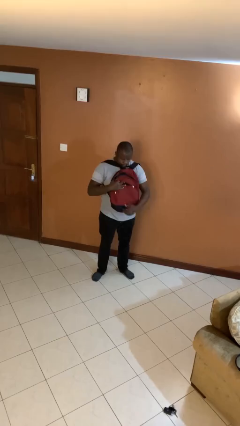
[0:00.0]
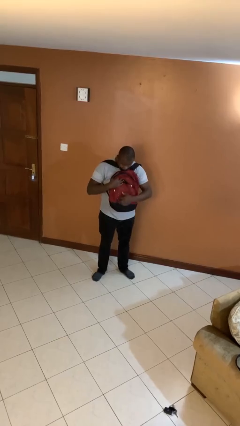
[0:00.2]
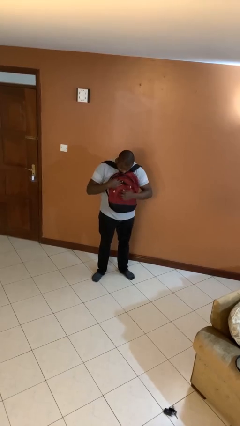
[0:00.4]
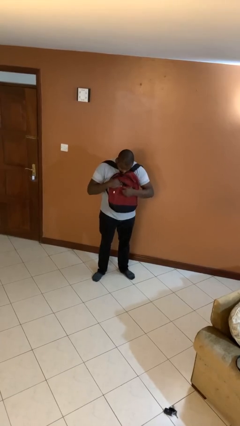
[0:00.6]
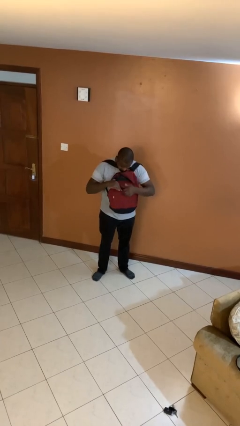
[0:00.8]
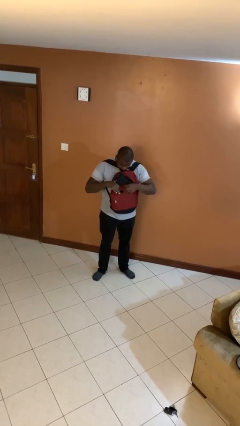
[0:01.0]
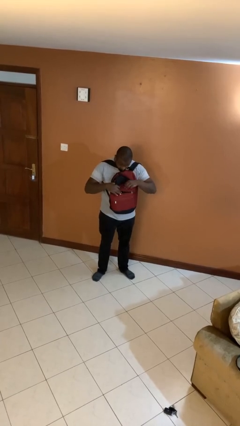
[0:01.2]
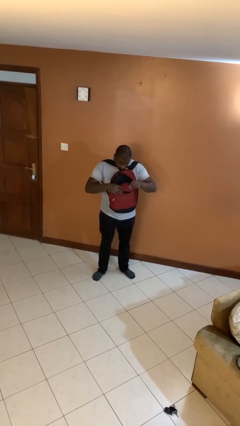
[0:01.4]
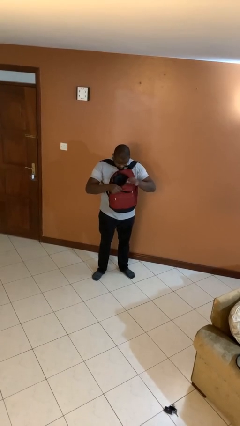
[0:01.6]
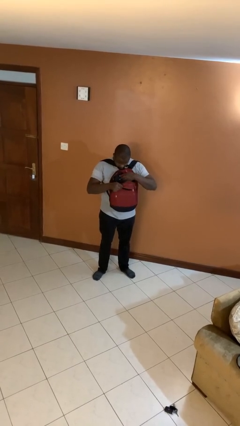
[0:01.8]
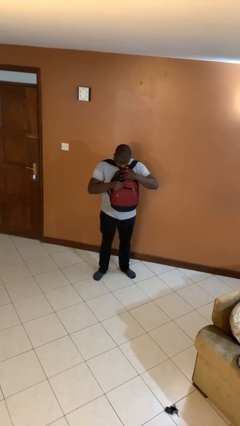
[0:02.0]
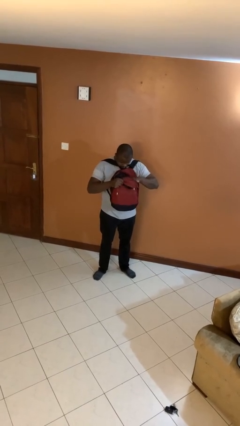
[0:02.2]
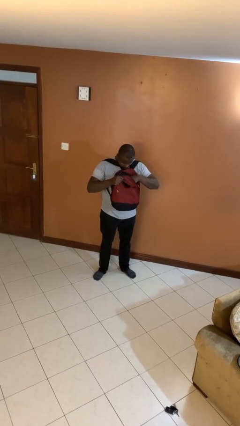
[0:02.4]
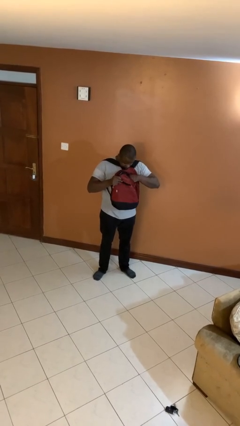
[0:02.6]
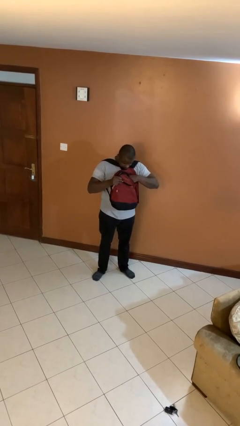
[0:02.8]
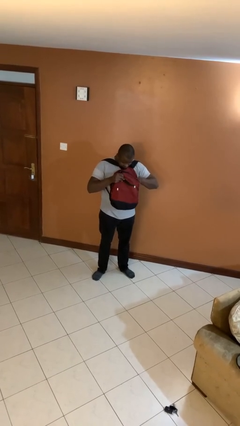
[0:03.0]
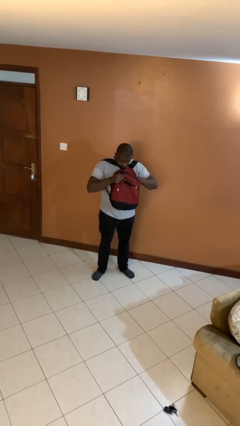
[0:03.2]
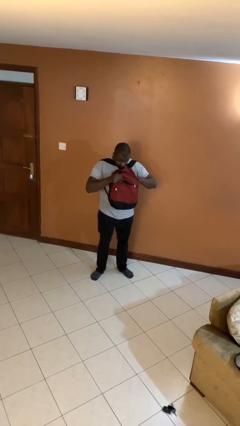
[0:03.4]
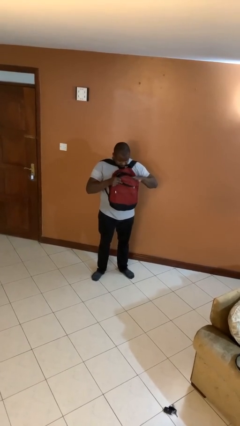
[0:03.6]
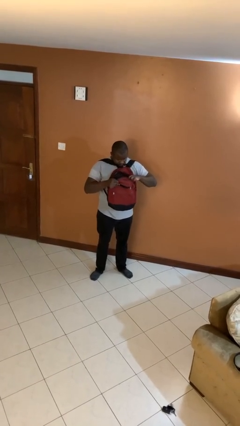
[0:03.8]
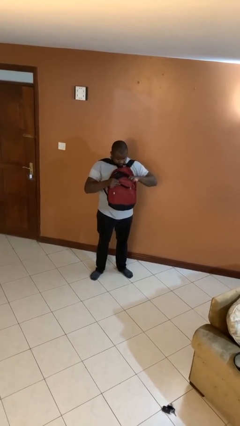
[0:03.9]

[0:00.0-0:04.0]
person searches in backpack

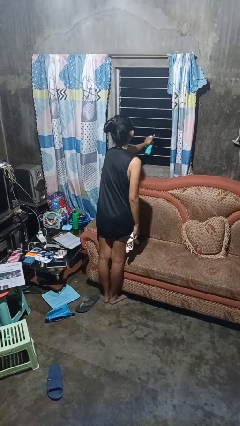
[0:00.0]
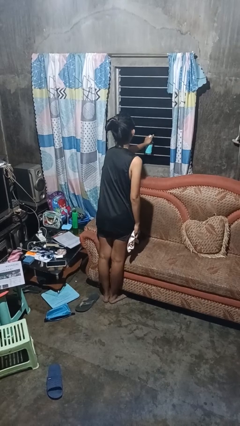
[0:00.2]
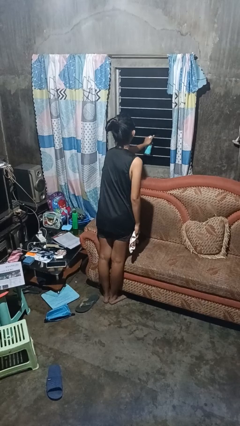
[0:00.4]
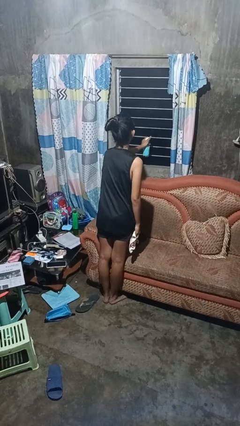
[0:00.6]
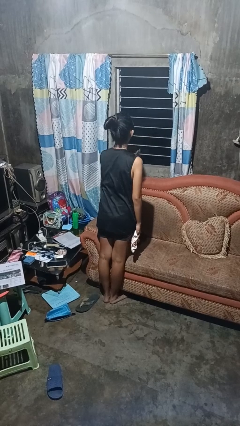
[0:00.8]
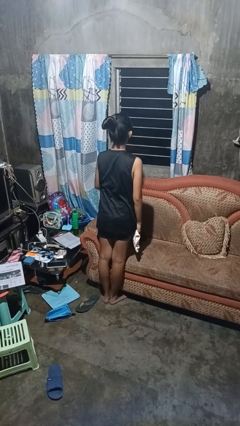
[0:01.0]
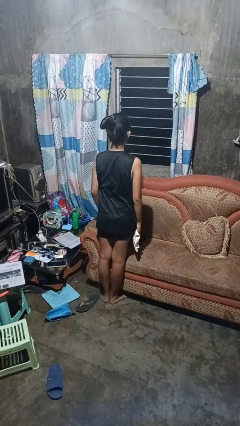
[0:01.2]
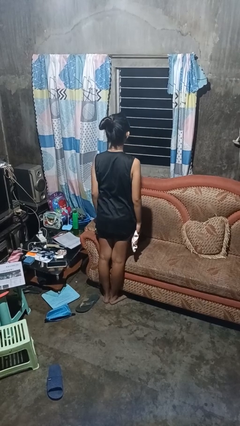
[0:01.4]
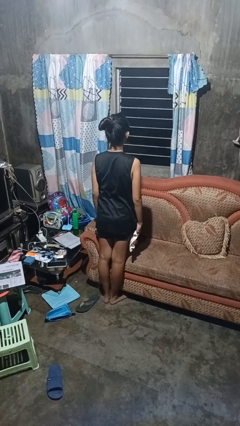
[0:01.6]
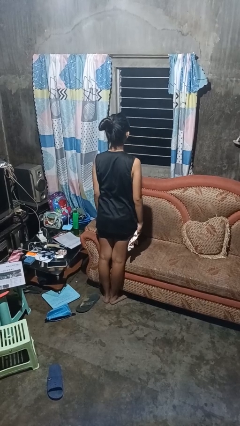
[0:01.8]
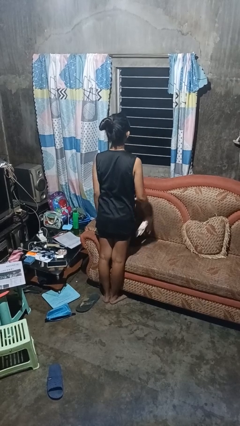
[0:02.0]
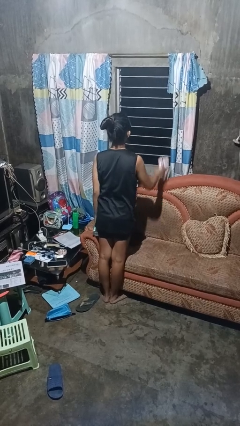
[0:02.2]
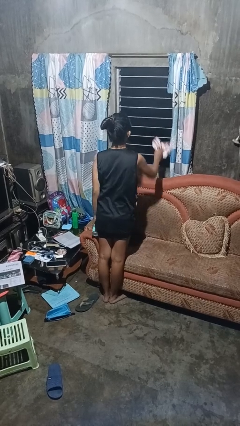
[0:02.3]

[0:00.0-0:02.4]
person sprays from bottle

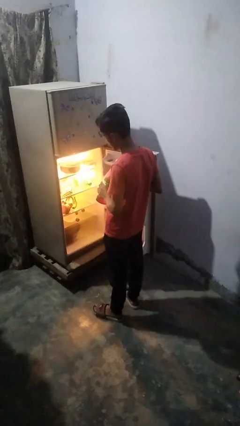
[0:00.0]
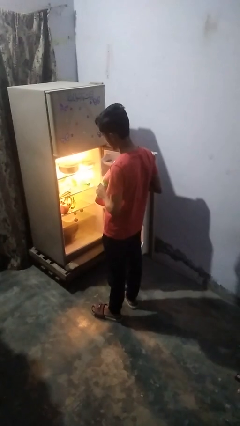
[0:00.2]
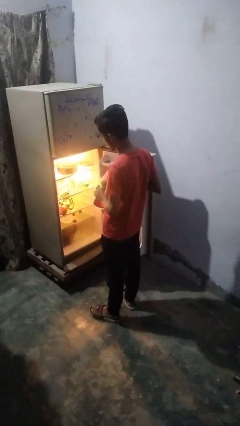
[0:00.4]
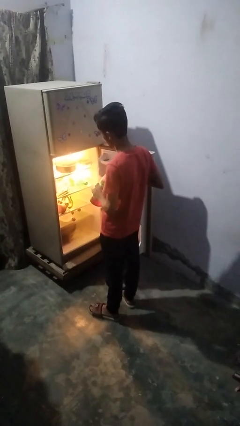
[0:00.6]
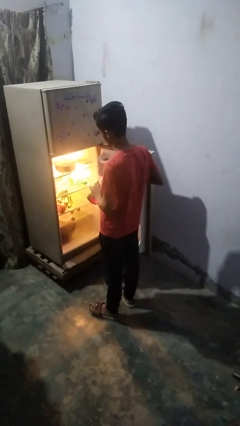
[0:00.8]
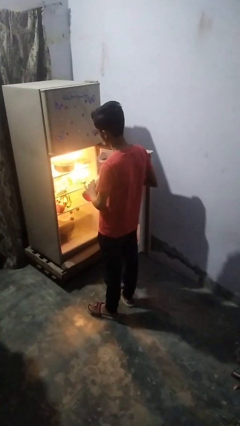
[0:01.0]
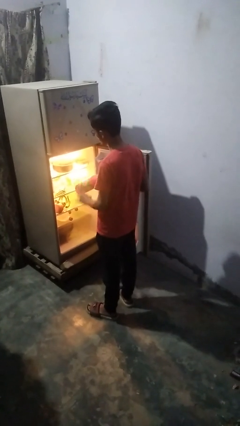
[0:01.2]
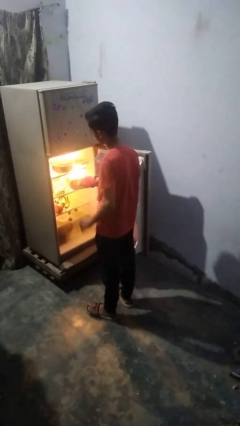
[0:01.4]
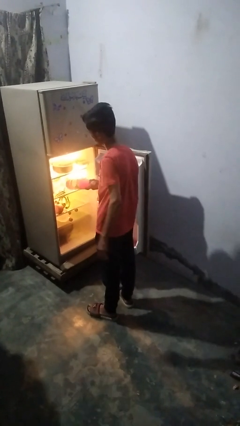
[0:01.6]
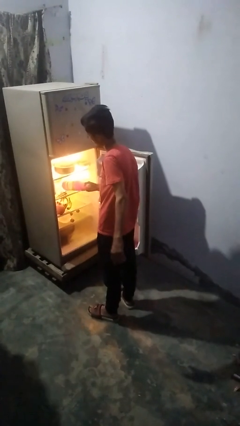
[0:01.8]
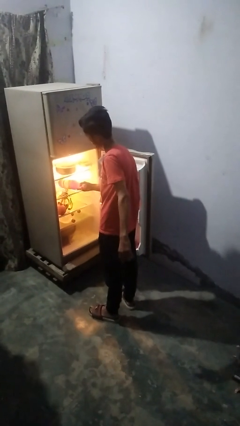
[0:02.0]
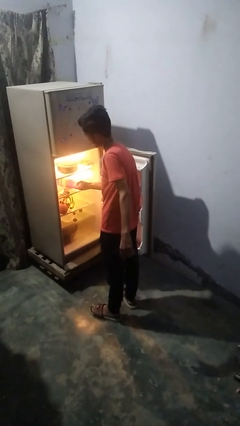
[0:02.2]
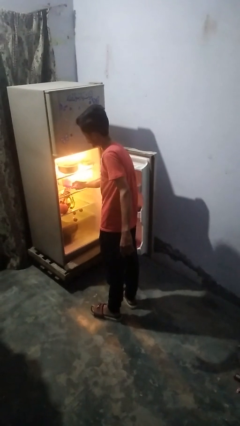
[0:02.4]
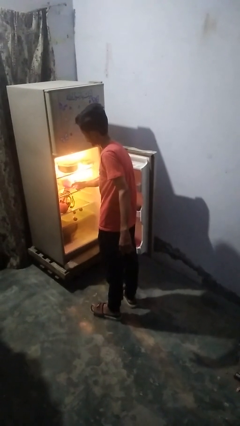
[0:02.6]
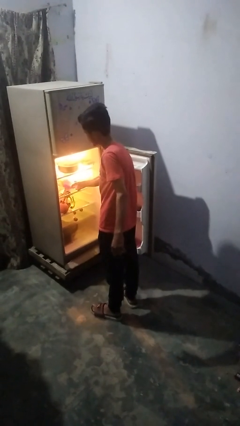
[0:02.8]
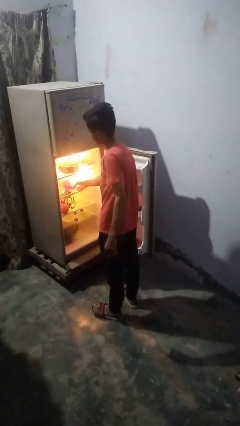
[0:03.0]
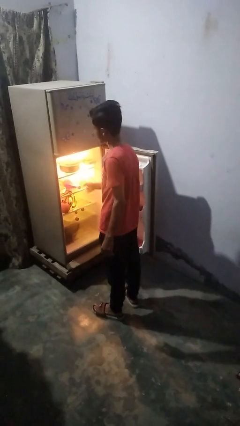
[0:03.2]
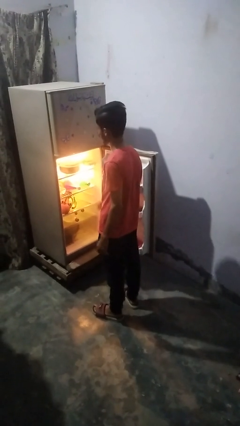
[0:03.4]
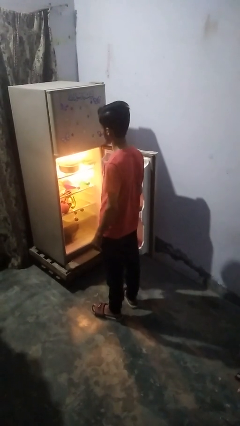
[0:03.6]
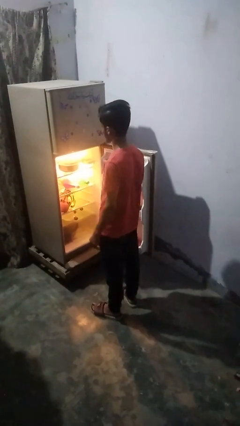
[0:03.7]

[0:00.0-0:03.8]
person takes object from refrigerator

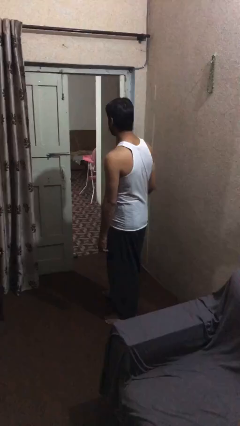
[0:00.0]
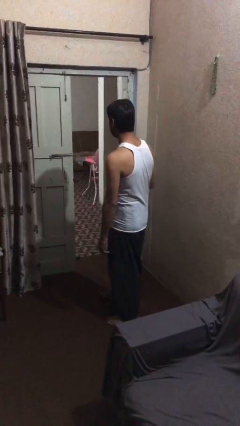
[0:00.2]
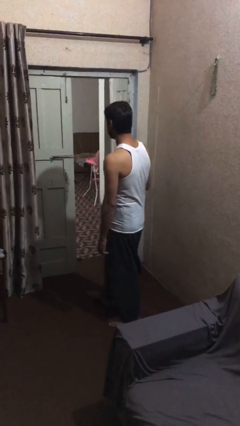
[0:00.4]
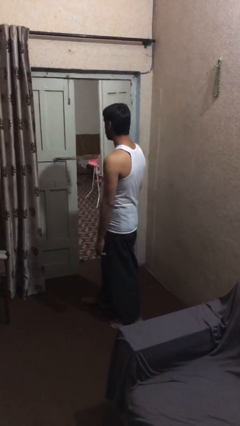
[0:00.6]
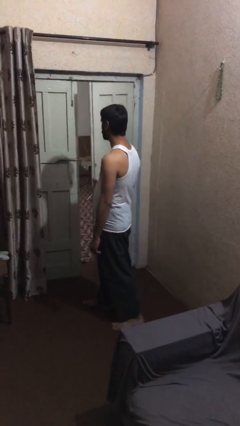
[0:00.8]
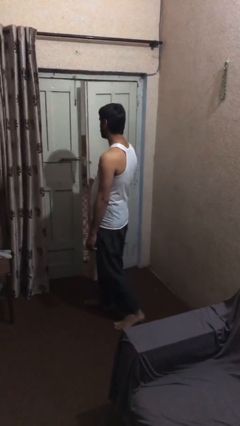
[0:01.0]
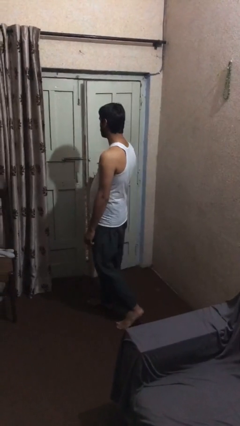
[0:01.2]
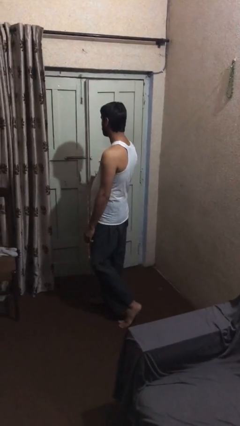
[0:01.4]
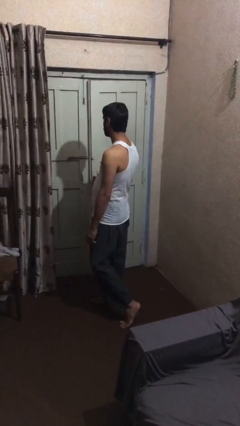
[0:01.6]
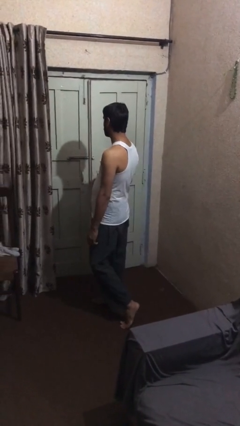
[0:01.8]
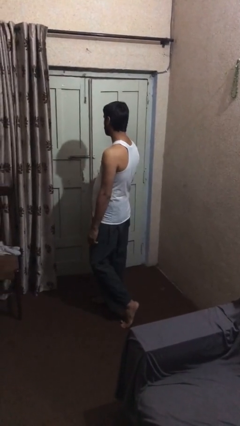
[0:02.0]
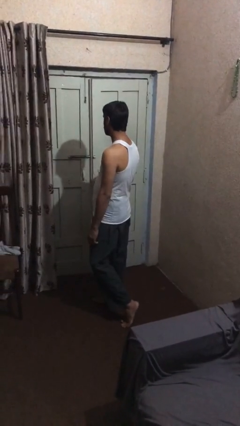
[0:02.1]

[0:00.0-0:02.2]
person closes facility door

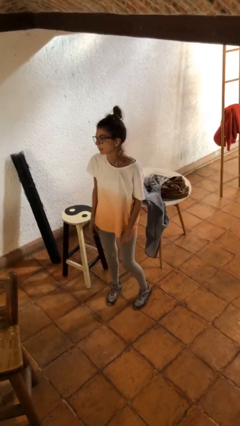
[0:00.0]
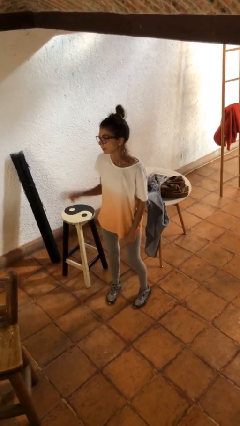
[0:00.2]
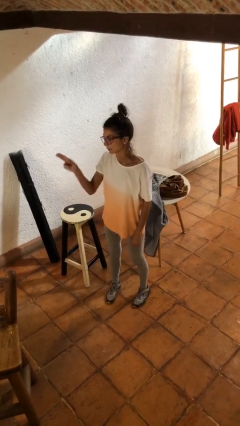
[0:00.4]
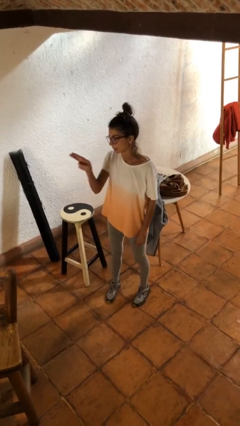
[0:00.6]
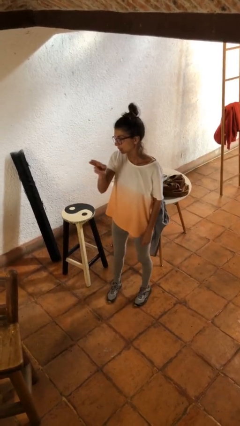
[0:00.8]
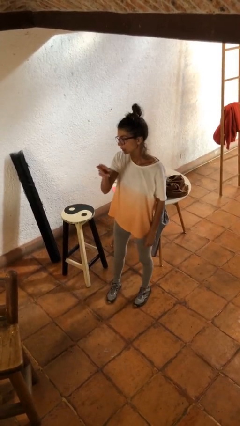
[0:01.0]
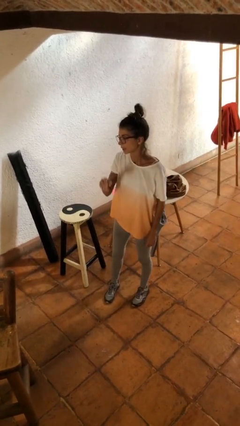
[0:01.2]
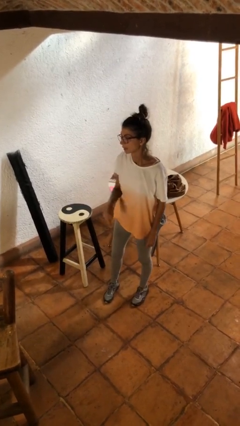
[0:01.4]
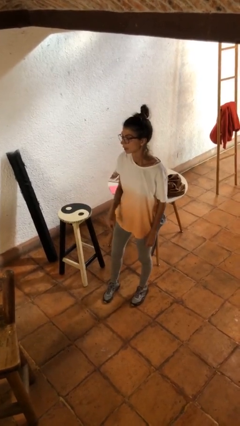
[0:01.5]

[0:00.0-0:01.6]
person gestures swipe left

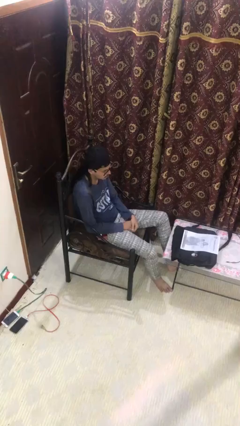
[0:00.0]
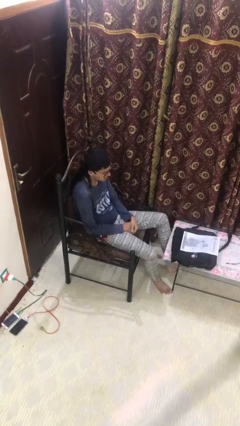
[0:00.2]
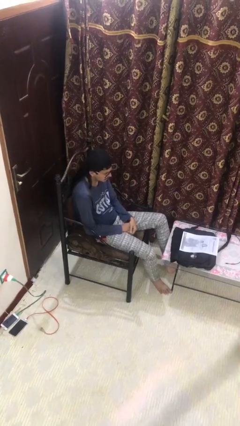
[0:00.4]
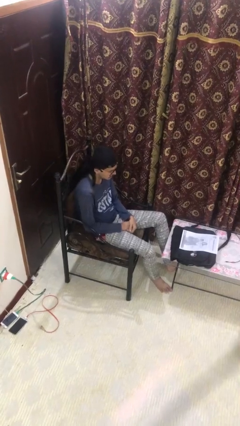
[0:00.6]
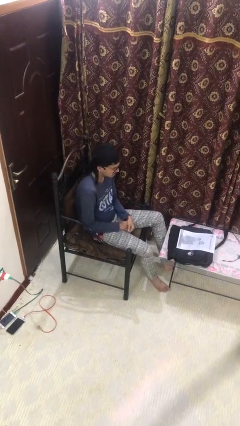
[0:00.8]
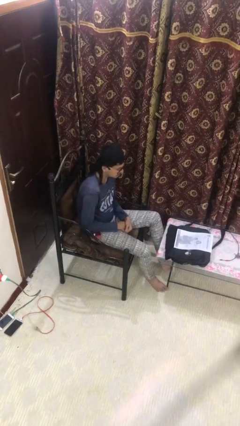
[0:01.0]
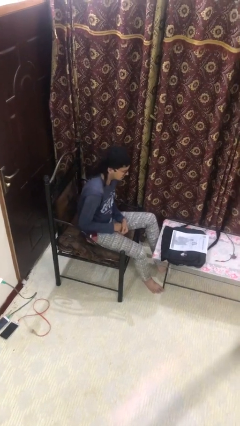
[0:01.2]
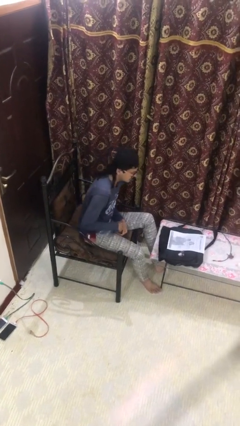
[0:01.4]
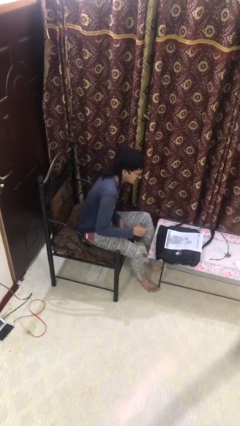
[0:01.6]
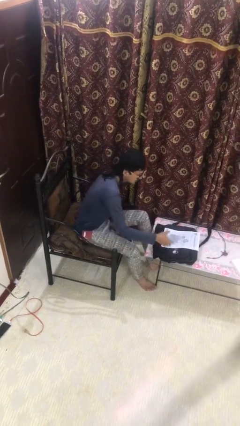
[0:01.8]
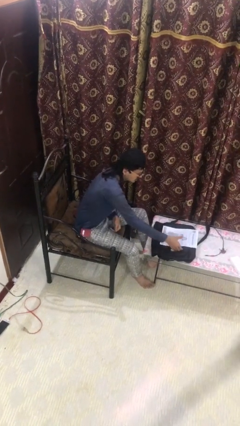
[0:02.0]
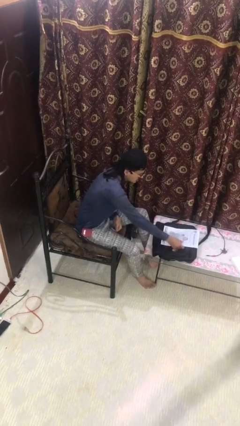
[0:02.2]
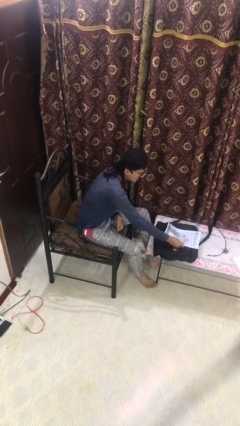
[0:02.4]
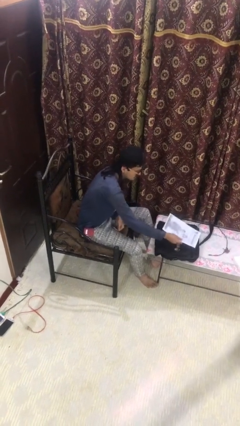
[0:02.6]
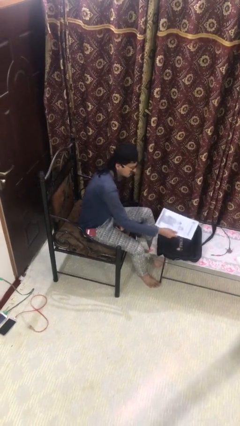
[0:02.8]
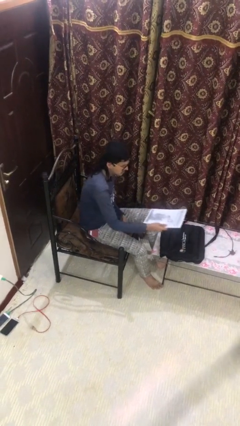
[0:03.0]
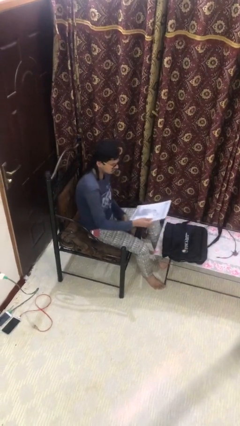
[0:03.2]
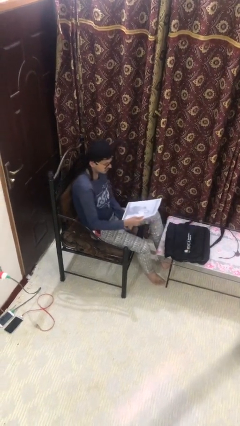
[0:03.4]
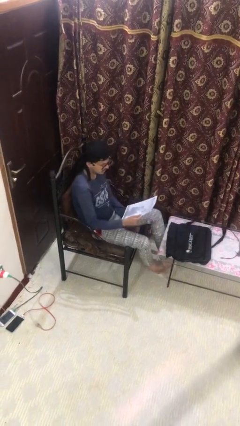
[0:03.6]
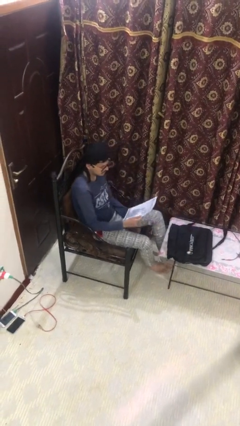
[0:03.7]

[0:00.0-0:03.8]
person picks up object from table
